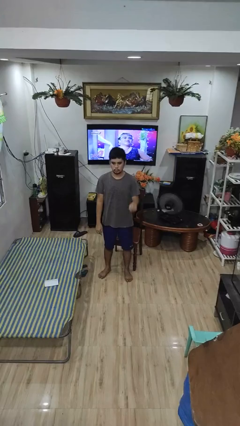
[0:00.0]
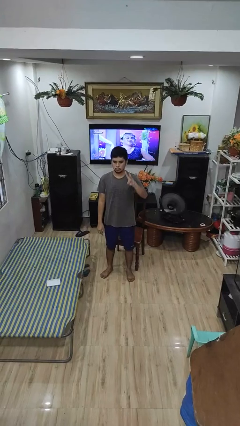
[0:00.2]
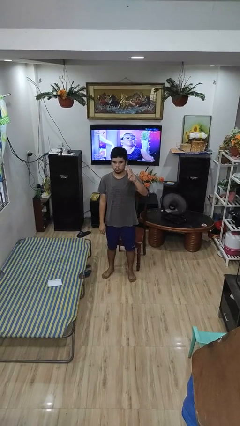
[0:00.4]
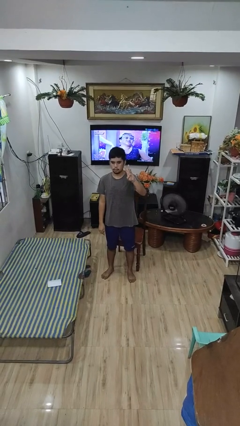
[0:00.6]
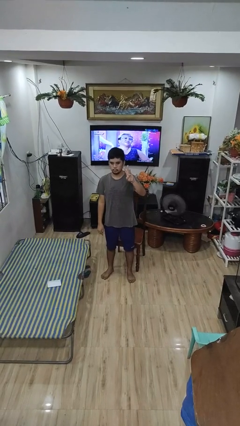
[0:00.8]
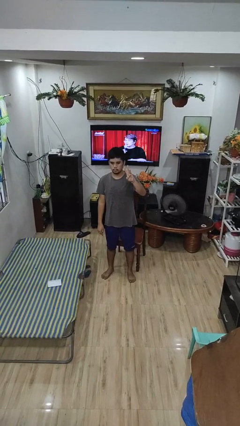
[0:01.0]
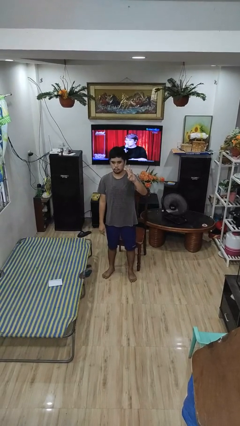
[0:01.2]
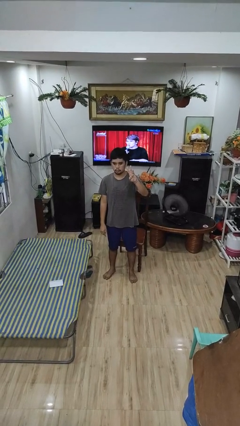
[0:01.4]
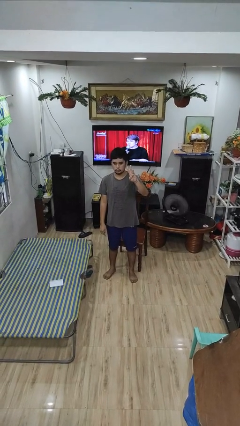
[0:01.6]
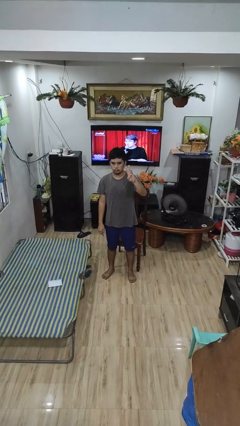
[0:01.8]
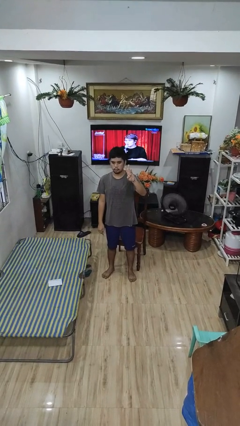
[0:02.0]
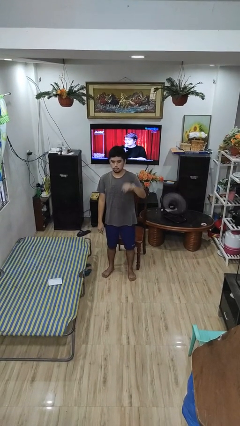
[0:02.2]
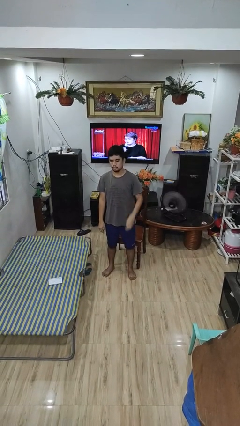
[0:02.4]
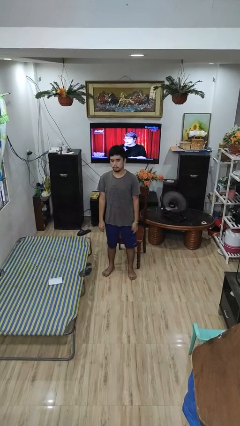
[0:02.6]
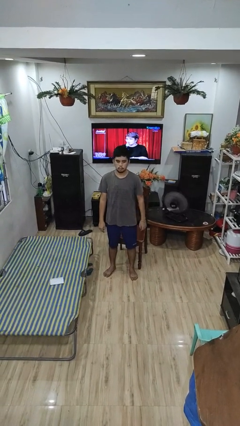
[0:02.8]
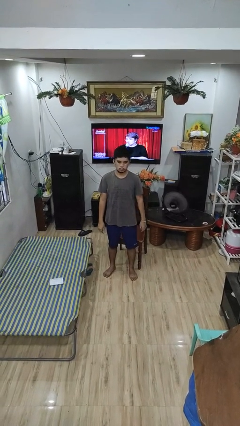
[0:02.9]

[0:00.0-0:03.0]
person gestures number three

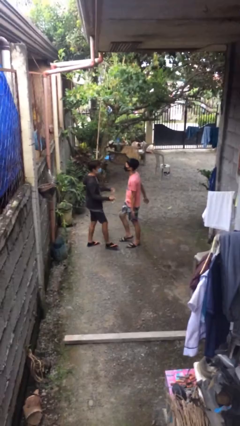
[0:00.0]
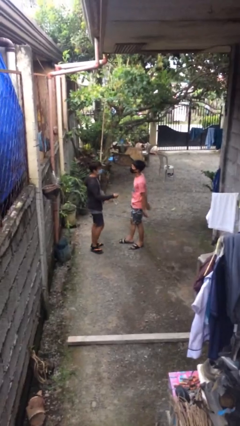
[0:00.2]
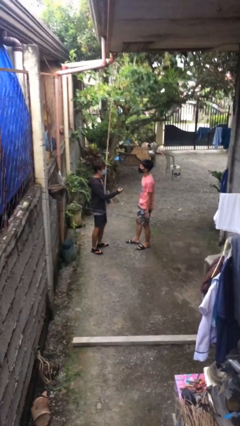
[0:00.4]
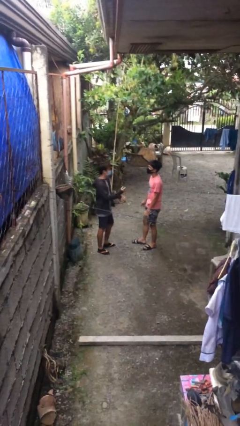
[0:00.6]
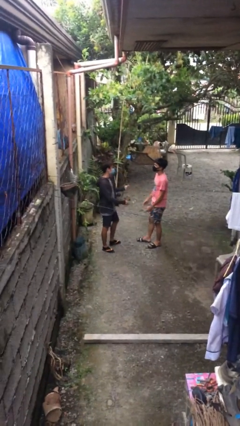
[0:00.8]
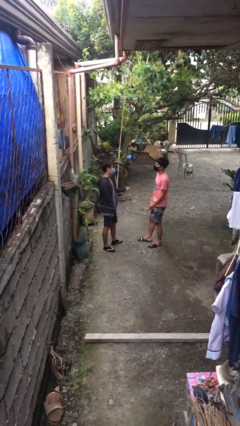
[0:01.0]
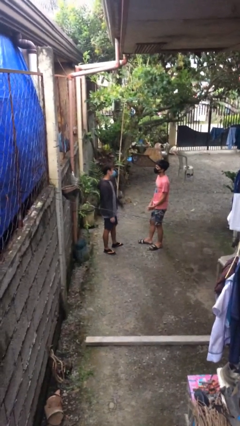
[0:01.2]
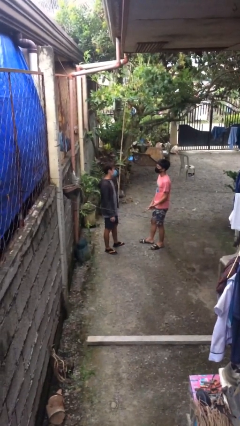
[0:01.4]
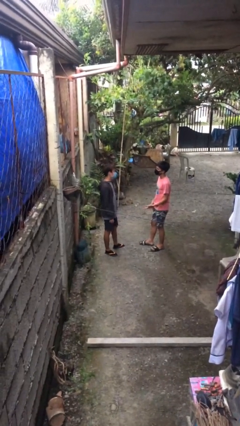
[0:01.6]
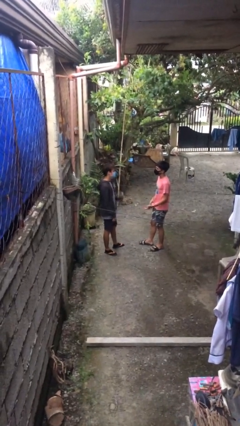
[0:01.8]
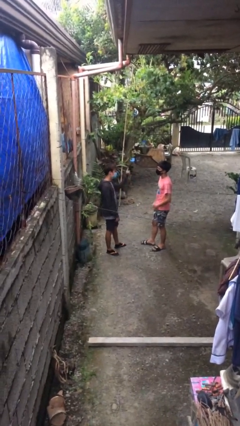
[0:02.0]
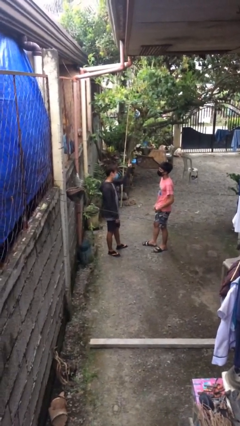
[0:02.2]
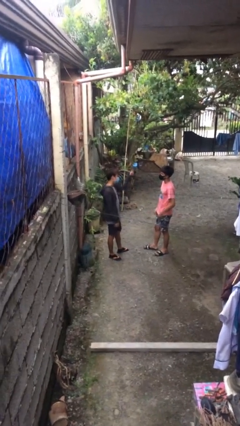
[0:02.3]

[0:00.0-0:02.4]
person talks to person

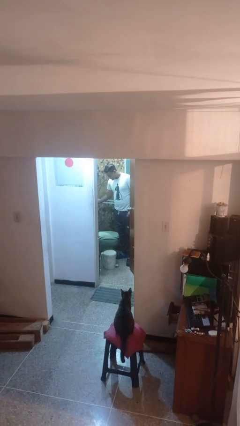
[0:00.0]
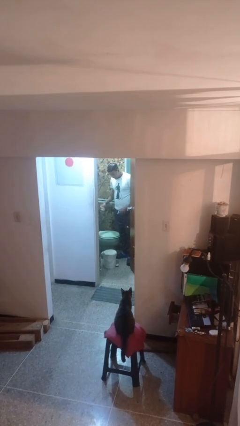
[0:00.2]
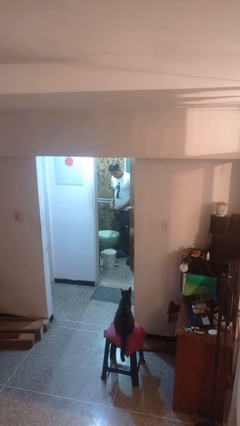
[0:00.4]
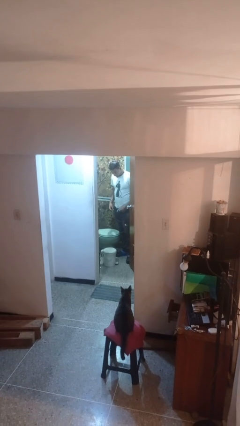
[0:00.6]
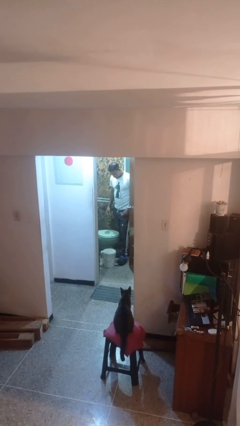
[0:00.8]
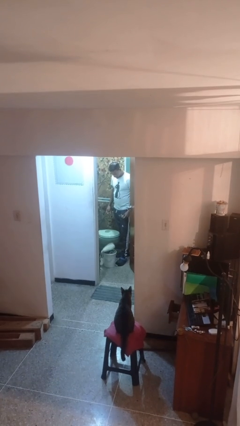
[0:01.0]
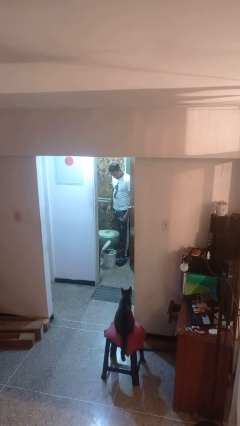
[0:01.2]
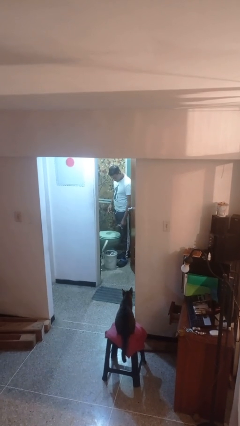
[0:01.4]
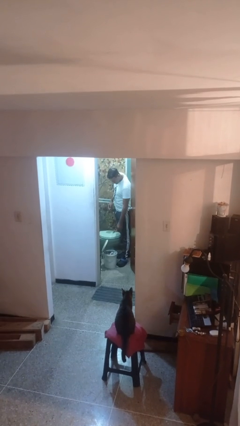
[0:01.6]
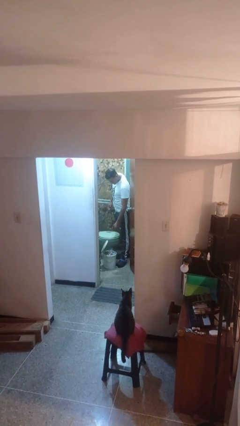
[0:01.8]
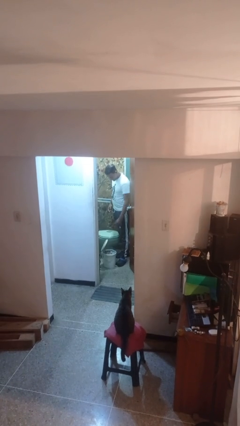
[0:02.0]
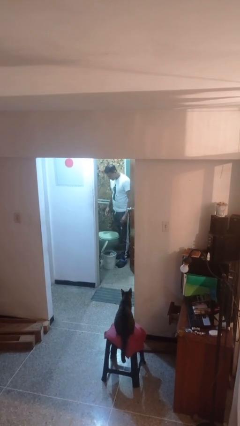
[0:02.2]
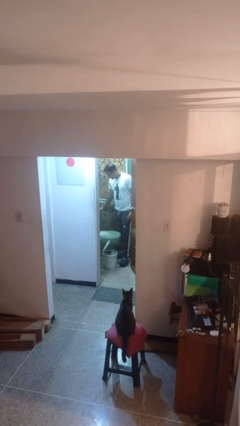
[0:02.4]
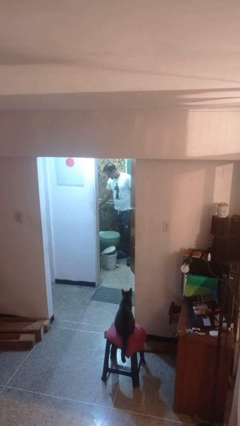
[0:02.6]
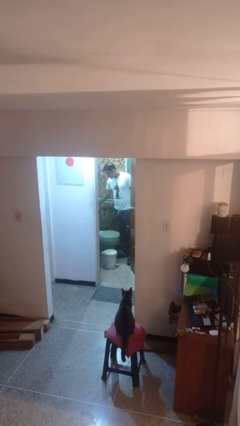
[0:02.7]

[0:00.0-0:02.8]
person discards trash

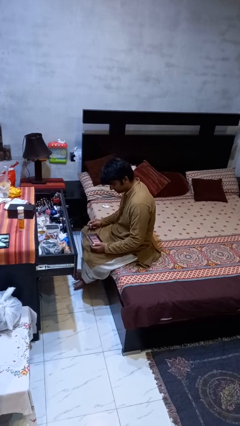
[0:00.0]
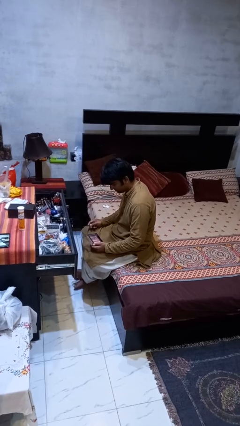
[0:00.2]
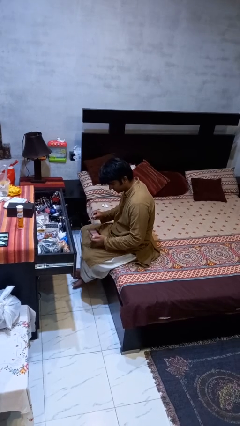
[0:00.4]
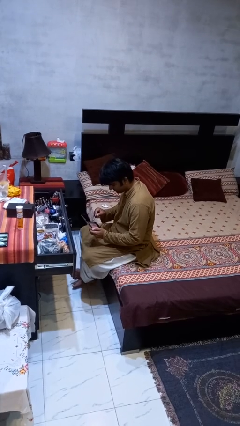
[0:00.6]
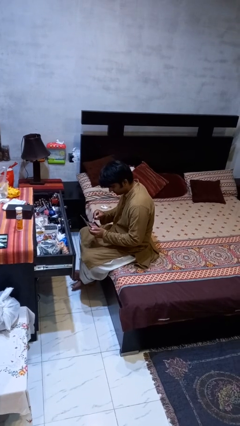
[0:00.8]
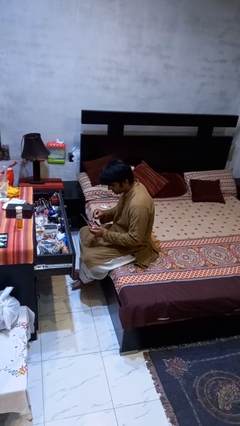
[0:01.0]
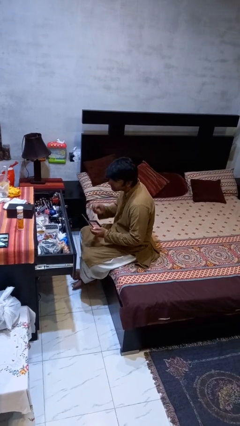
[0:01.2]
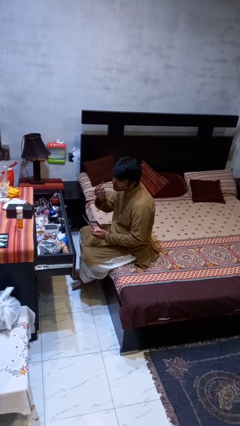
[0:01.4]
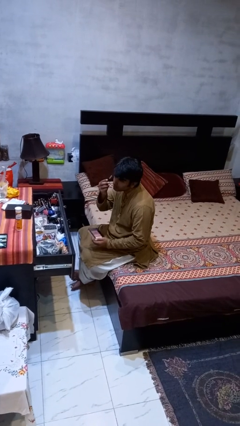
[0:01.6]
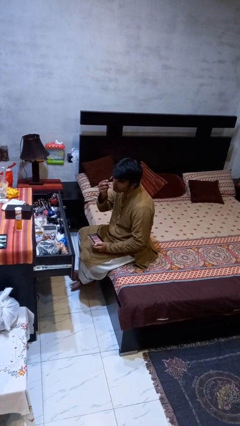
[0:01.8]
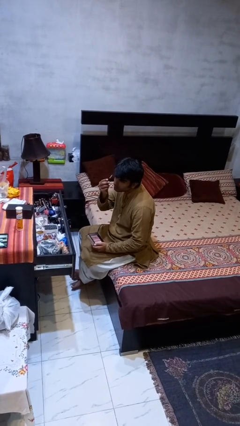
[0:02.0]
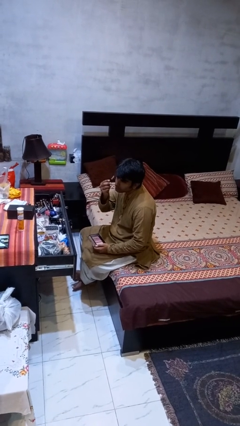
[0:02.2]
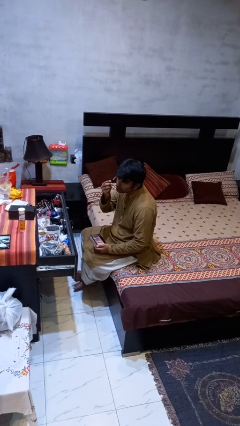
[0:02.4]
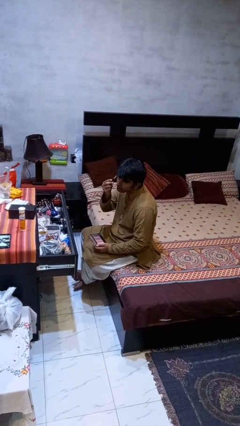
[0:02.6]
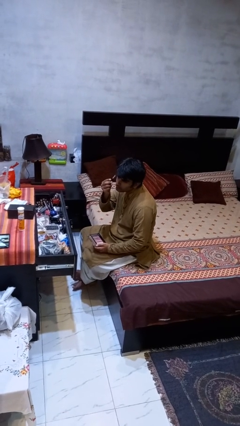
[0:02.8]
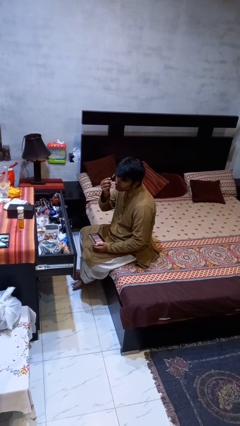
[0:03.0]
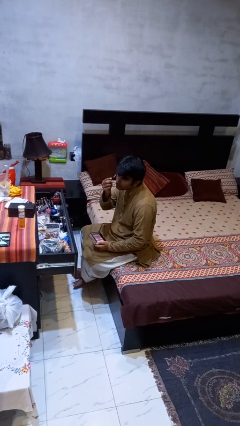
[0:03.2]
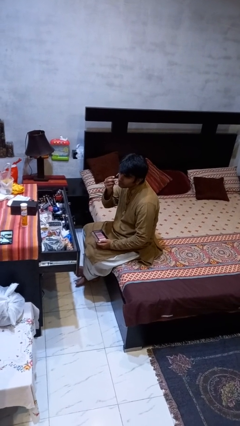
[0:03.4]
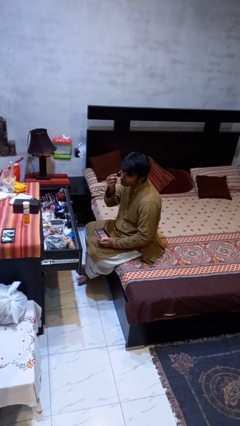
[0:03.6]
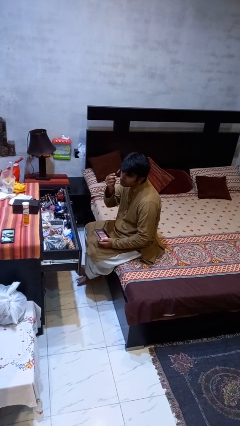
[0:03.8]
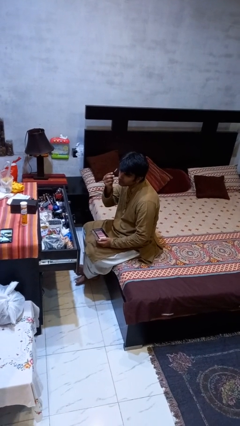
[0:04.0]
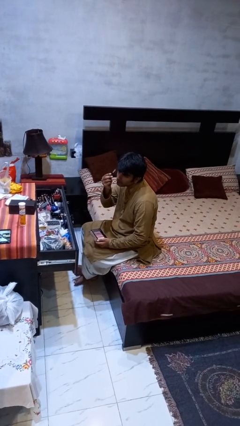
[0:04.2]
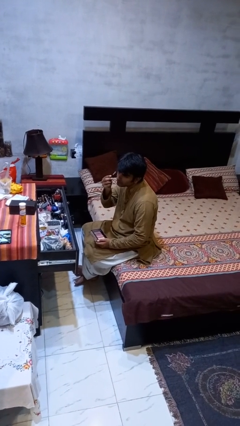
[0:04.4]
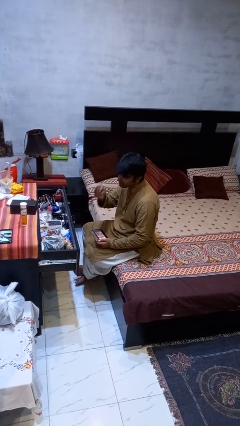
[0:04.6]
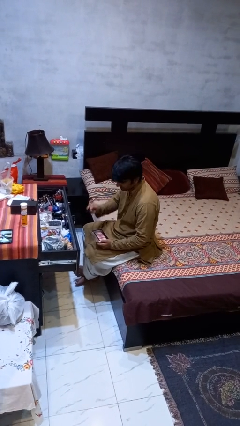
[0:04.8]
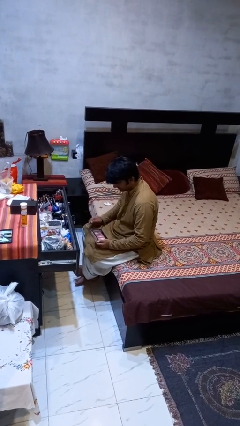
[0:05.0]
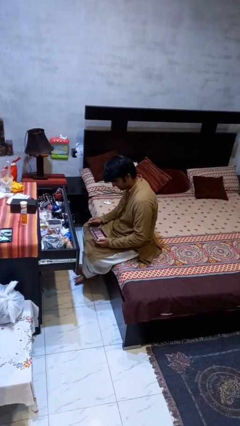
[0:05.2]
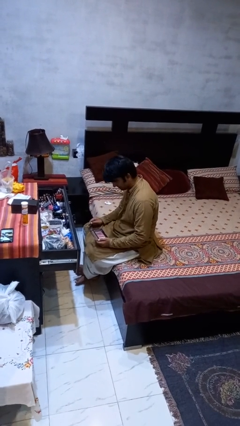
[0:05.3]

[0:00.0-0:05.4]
person applies eye makeup

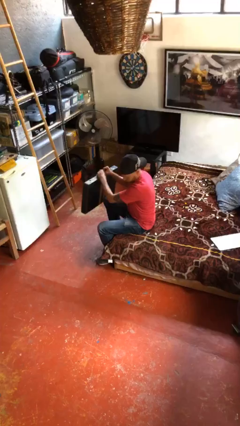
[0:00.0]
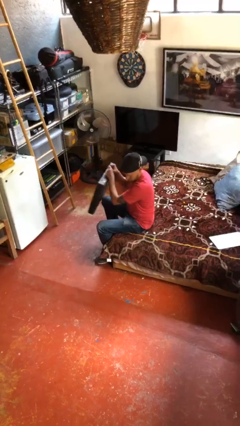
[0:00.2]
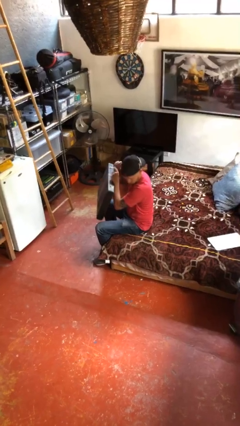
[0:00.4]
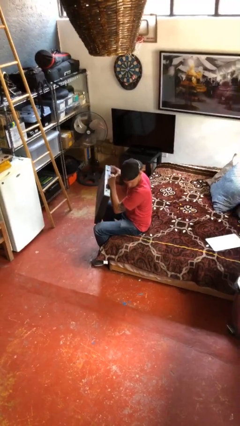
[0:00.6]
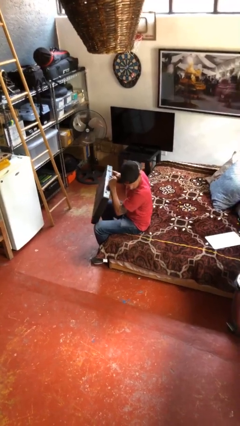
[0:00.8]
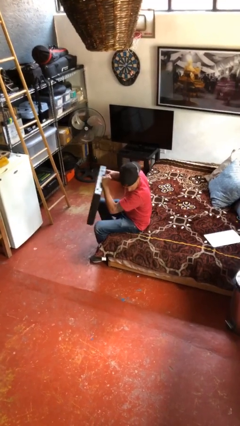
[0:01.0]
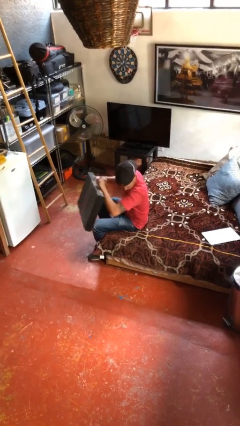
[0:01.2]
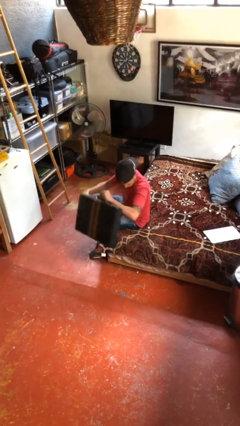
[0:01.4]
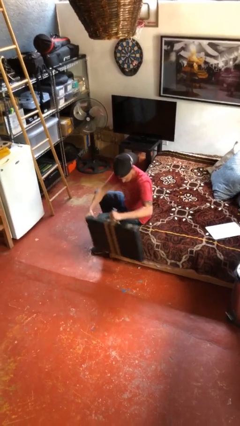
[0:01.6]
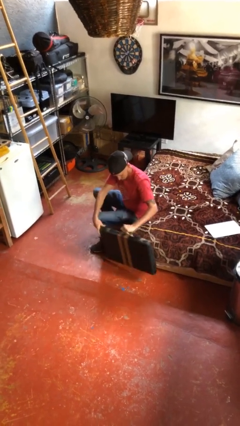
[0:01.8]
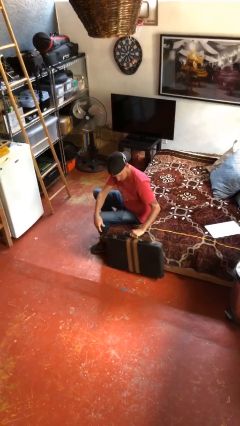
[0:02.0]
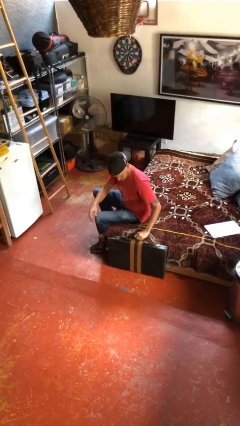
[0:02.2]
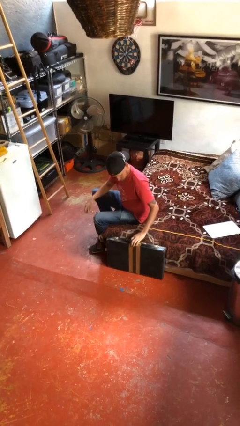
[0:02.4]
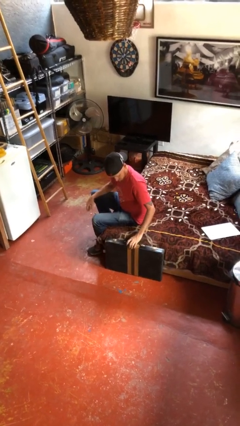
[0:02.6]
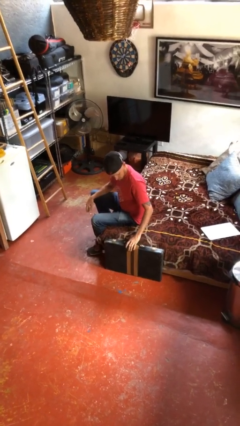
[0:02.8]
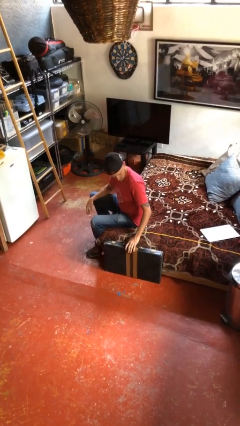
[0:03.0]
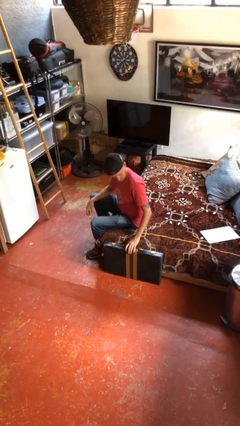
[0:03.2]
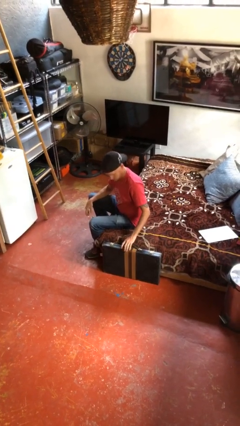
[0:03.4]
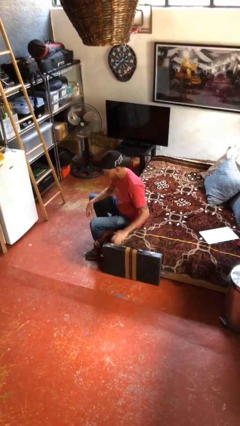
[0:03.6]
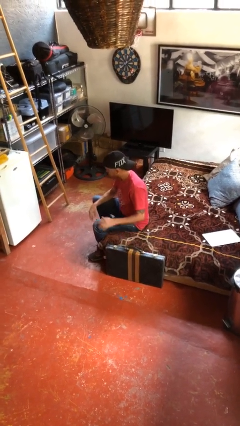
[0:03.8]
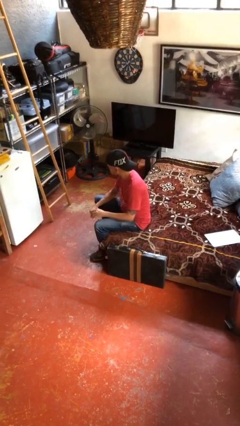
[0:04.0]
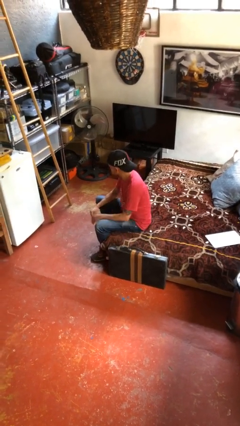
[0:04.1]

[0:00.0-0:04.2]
person puts down object on floor
